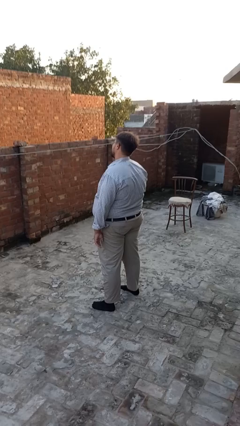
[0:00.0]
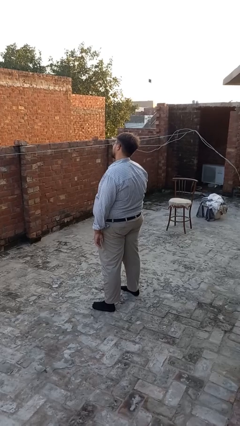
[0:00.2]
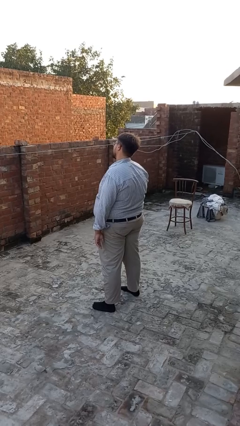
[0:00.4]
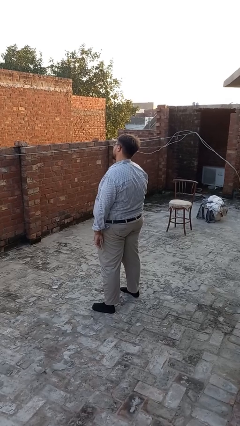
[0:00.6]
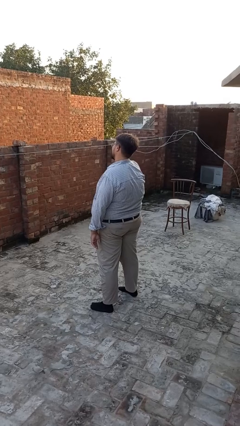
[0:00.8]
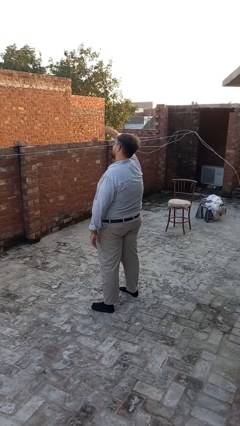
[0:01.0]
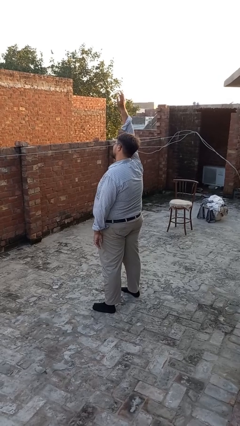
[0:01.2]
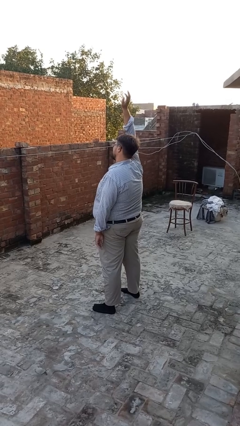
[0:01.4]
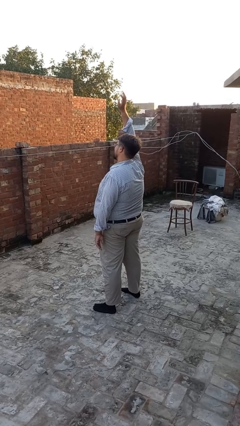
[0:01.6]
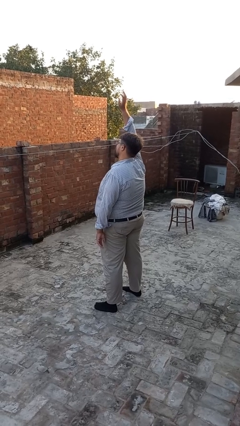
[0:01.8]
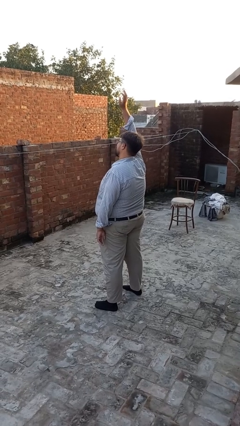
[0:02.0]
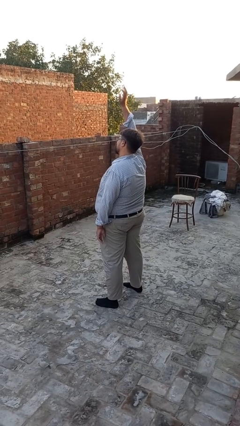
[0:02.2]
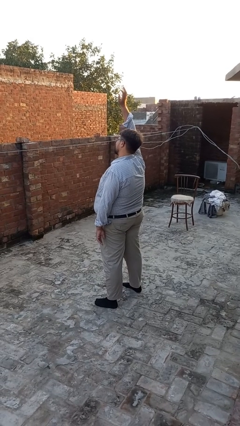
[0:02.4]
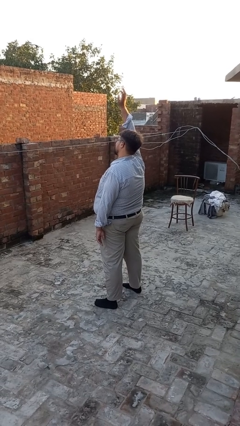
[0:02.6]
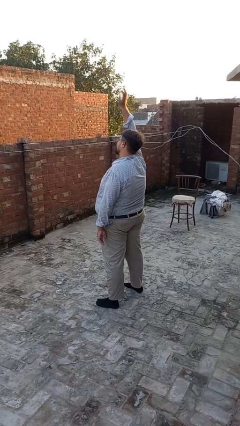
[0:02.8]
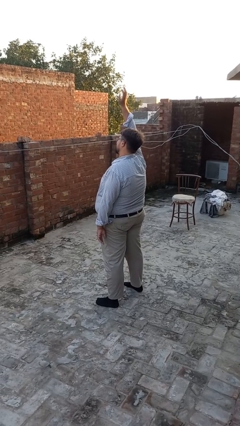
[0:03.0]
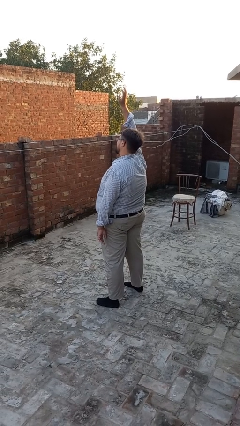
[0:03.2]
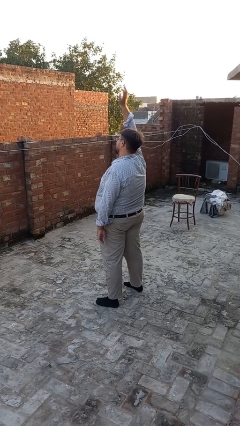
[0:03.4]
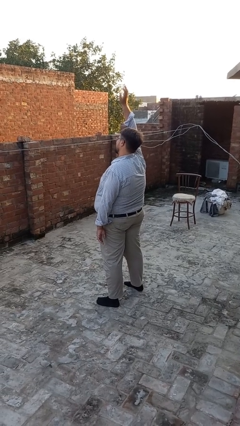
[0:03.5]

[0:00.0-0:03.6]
person gestures raise hand

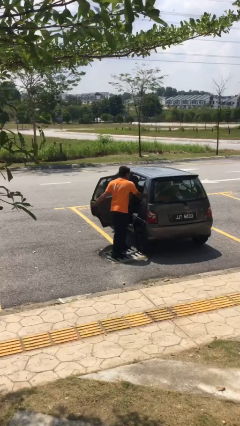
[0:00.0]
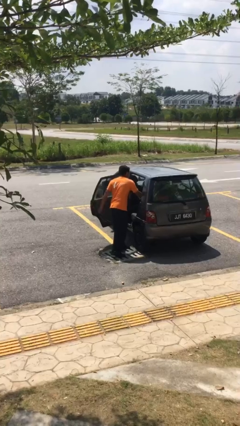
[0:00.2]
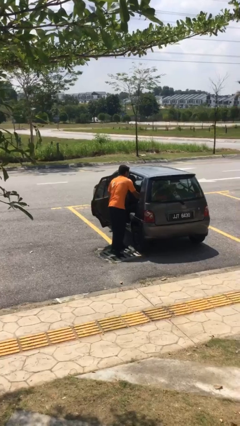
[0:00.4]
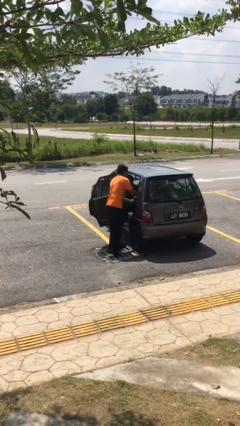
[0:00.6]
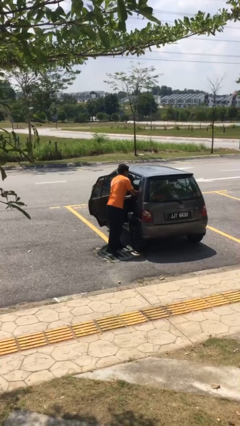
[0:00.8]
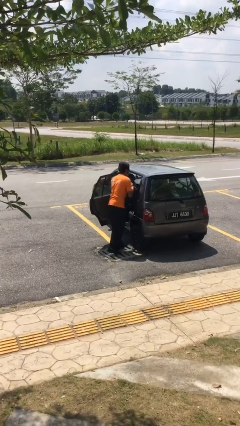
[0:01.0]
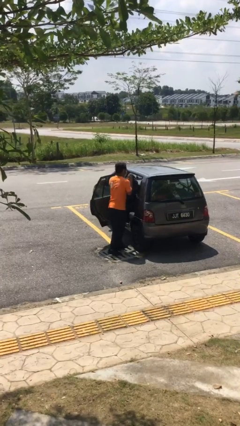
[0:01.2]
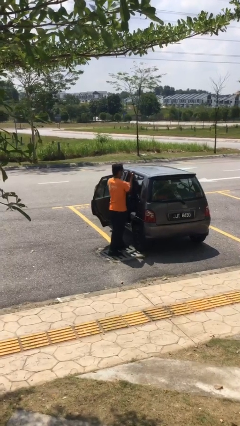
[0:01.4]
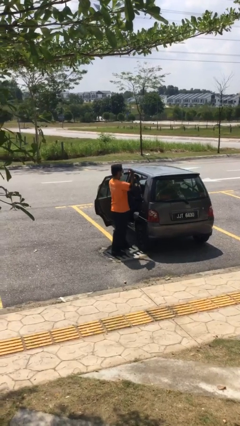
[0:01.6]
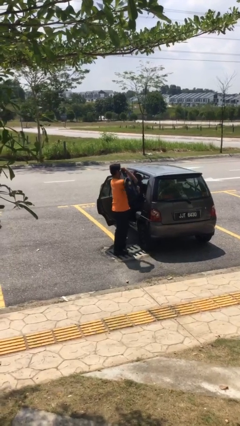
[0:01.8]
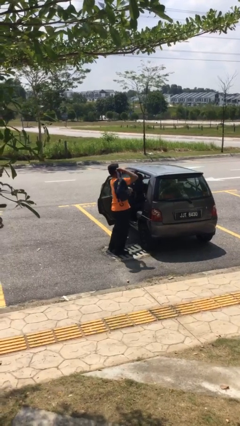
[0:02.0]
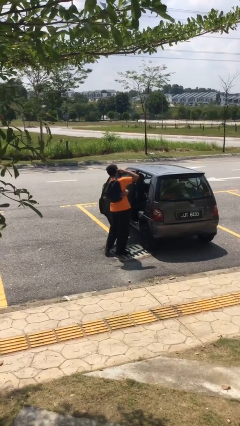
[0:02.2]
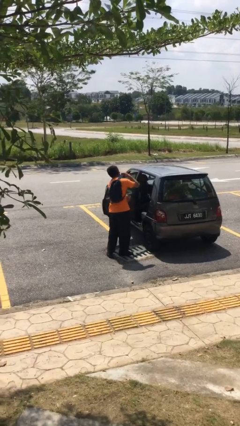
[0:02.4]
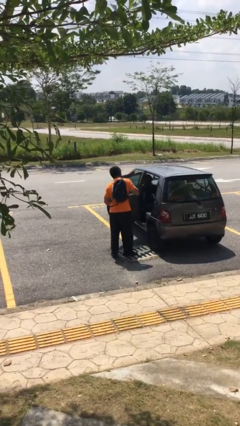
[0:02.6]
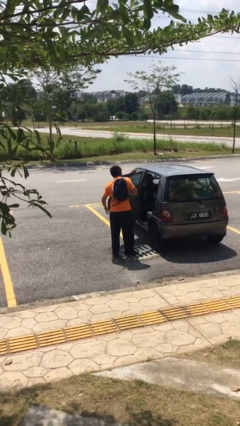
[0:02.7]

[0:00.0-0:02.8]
person unloads car

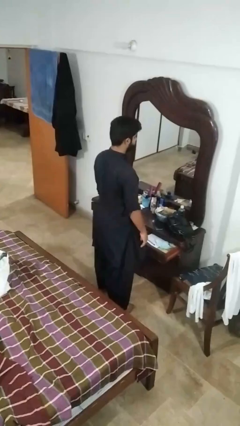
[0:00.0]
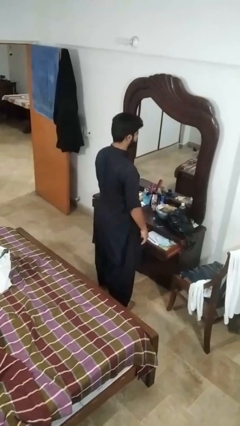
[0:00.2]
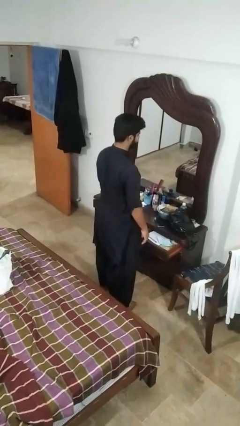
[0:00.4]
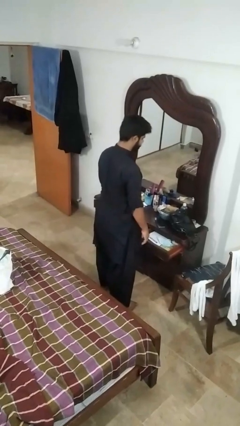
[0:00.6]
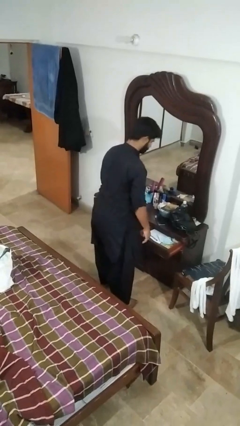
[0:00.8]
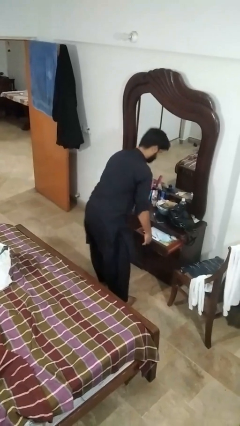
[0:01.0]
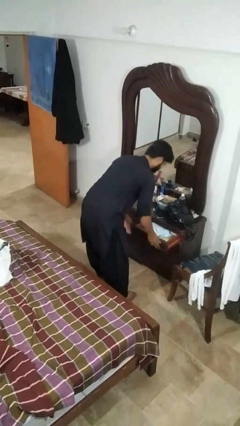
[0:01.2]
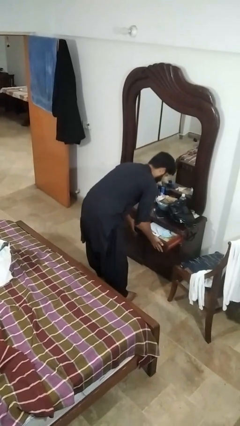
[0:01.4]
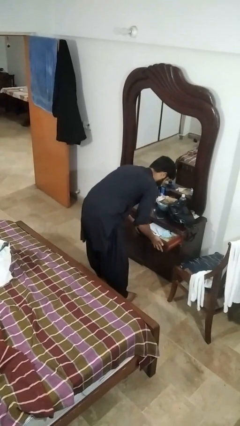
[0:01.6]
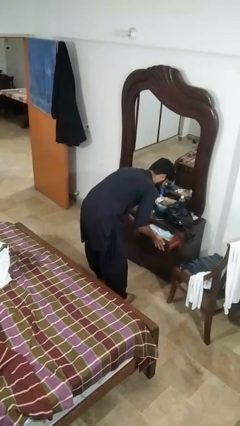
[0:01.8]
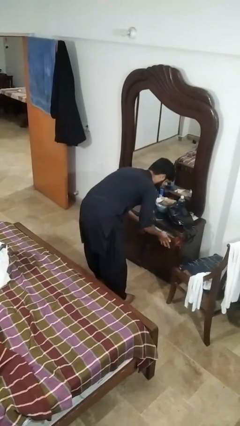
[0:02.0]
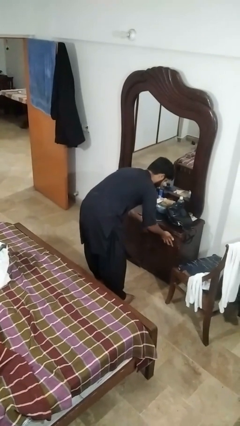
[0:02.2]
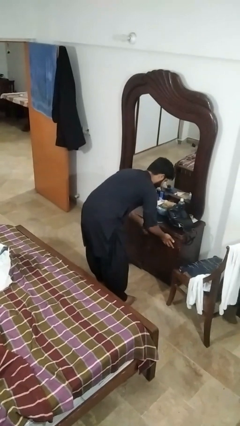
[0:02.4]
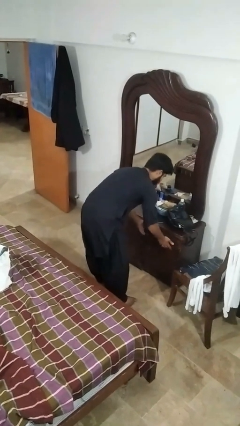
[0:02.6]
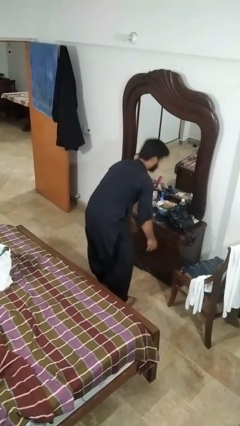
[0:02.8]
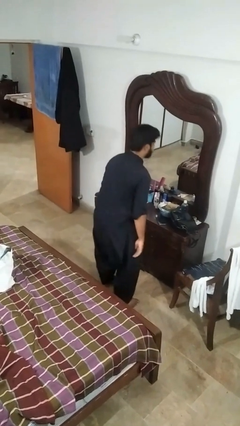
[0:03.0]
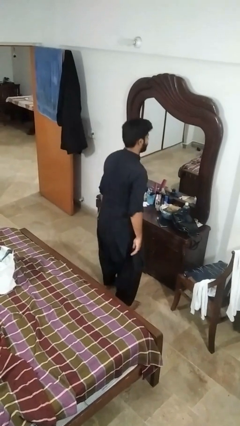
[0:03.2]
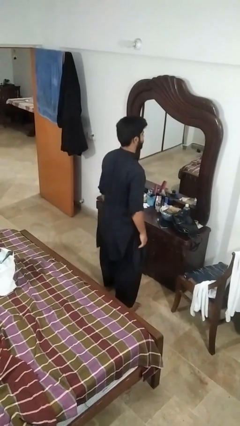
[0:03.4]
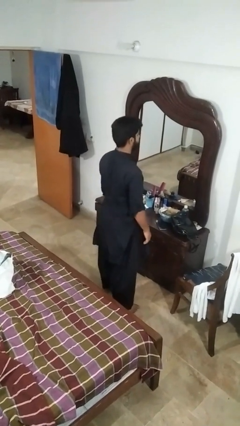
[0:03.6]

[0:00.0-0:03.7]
person closes dresser drawer

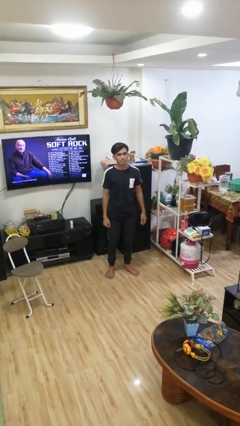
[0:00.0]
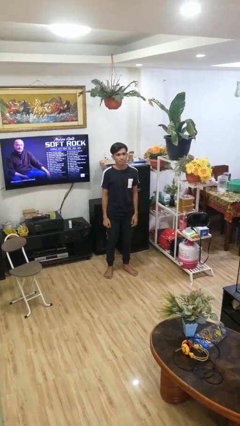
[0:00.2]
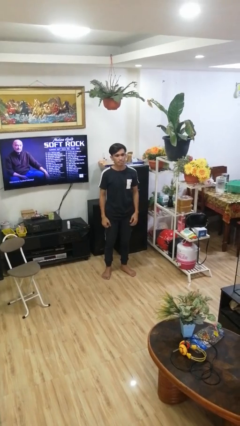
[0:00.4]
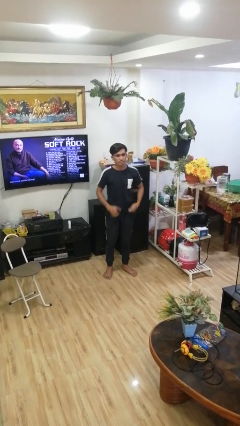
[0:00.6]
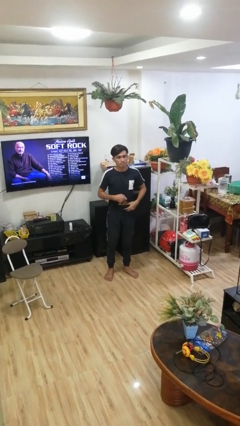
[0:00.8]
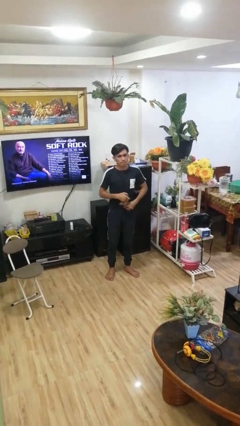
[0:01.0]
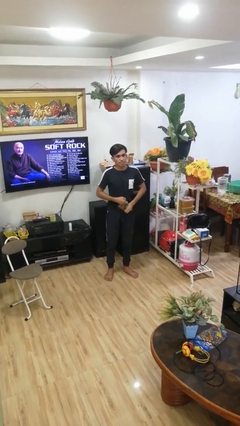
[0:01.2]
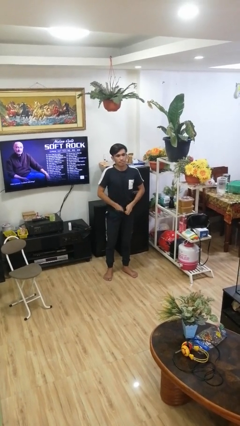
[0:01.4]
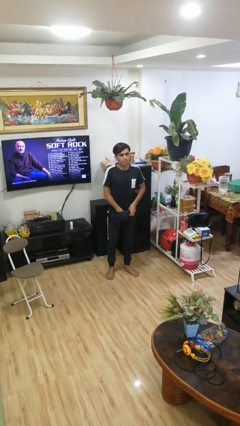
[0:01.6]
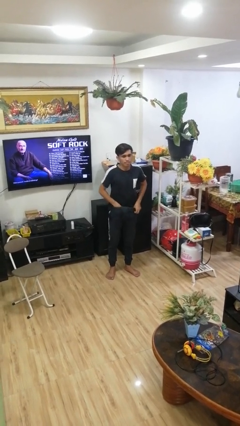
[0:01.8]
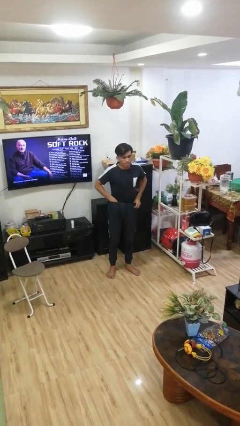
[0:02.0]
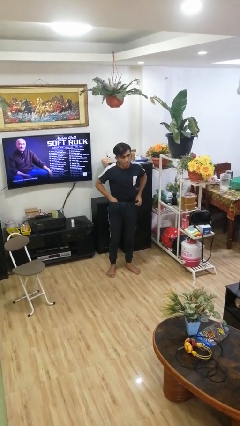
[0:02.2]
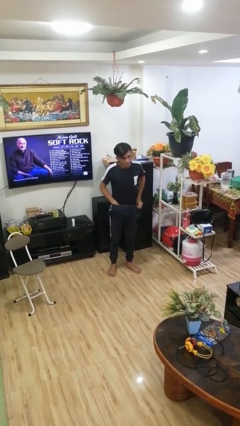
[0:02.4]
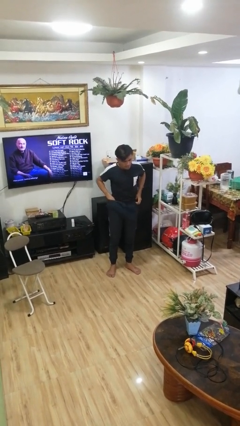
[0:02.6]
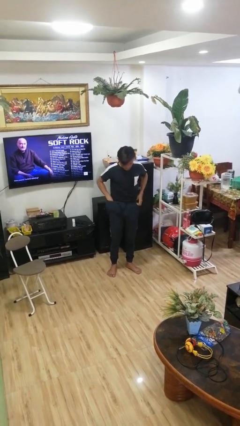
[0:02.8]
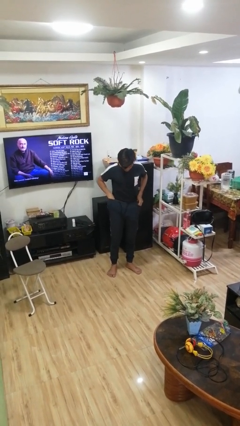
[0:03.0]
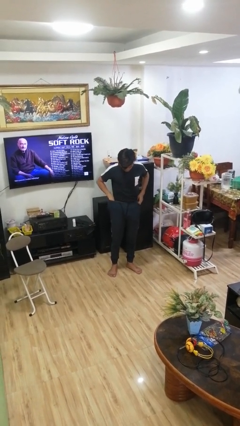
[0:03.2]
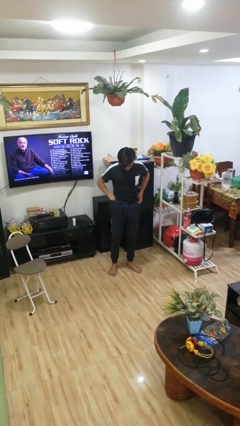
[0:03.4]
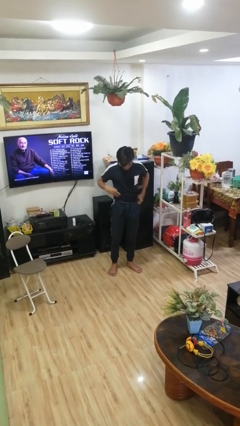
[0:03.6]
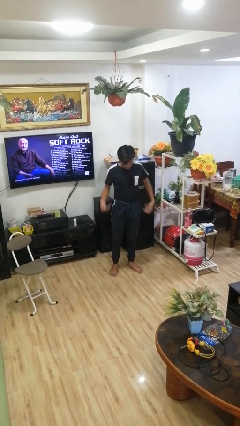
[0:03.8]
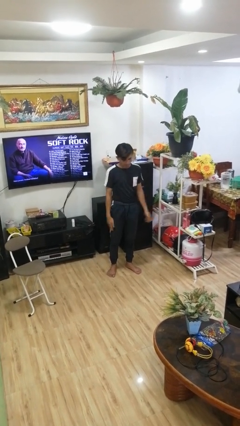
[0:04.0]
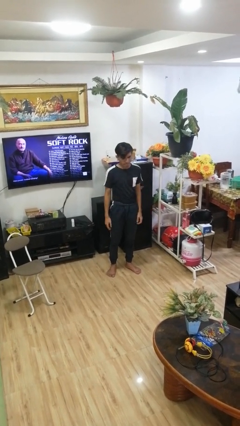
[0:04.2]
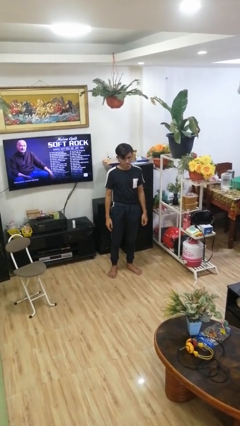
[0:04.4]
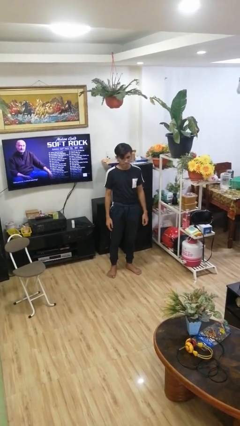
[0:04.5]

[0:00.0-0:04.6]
person tucks in shirt

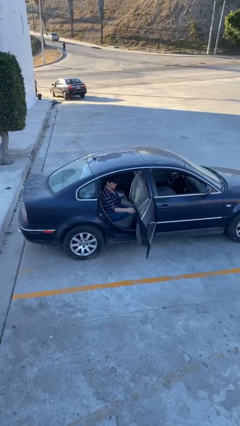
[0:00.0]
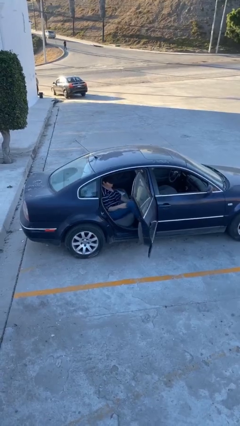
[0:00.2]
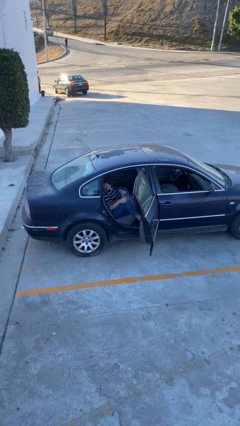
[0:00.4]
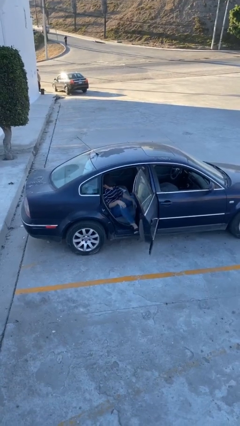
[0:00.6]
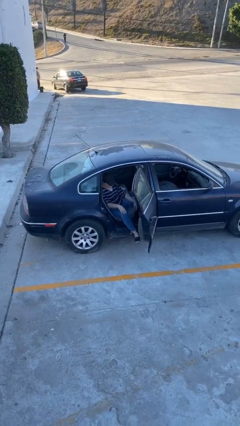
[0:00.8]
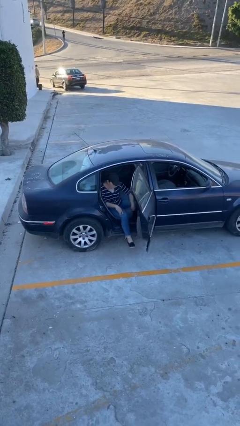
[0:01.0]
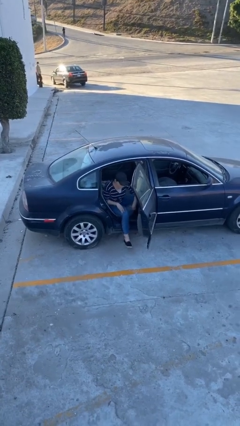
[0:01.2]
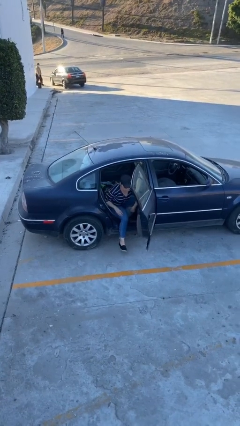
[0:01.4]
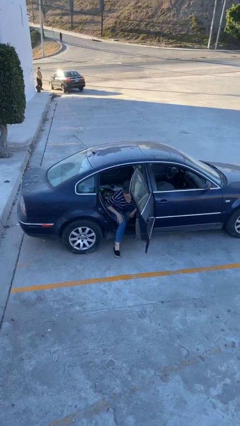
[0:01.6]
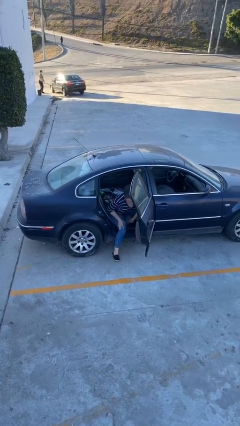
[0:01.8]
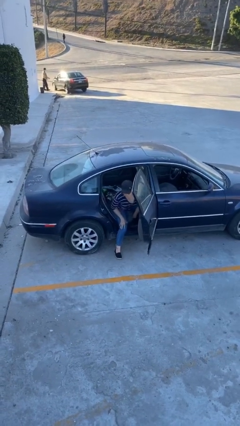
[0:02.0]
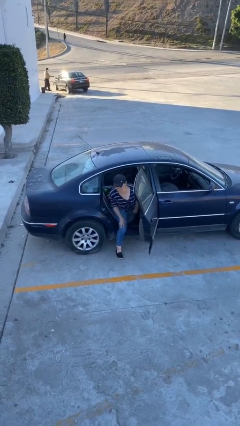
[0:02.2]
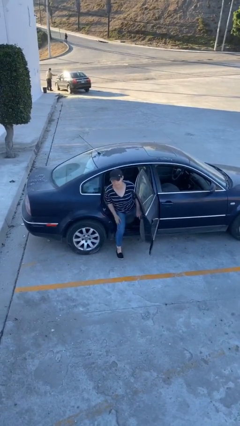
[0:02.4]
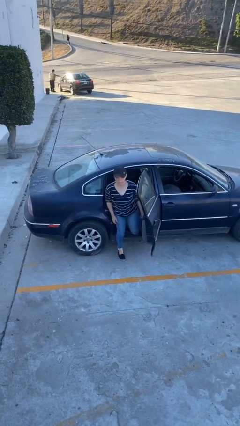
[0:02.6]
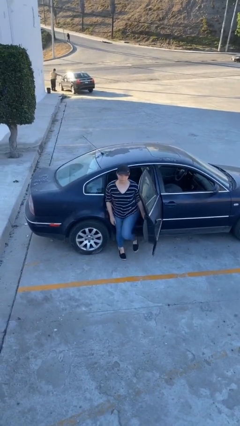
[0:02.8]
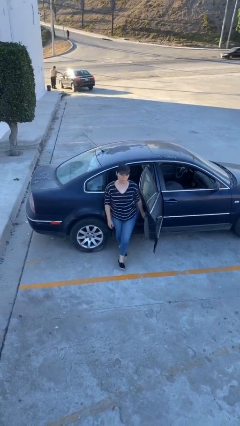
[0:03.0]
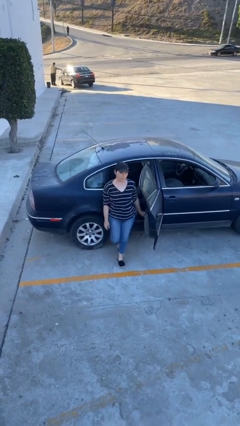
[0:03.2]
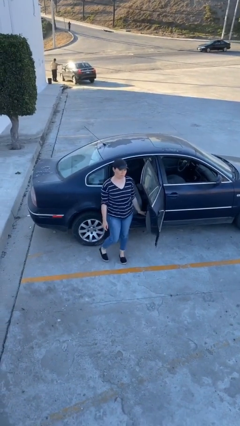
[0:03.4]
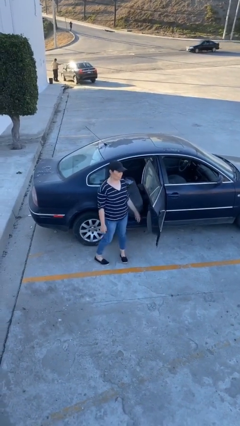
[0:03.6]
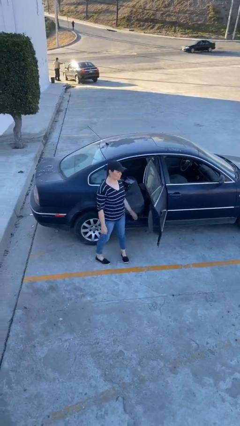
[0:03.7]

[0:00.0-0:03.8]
person exits car
